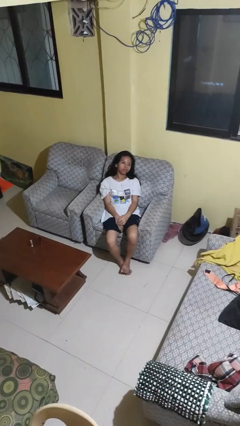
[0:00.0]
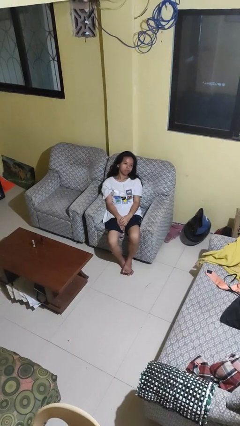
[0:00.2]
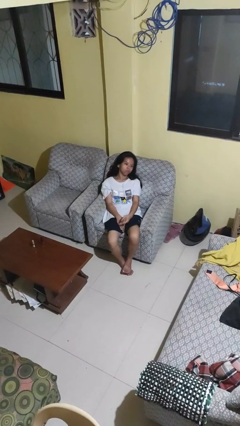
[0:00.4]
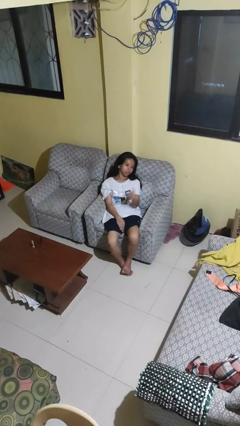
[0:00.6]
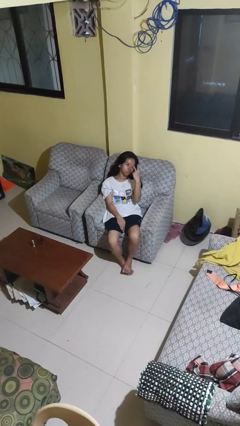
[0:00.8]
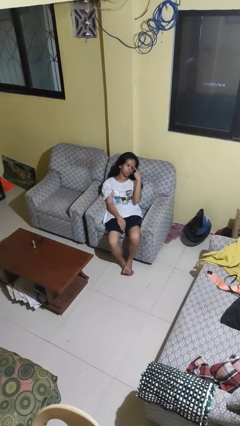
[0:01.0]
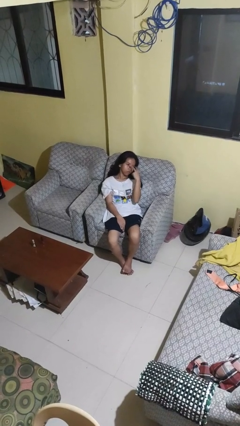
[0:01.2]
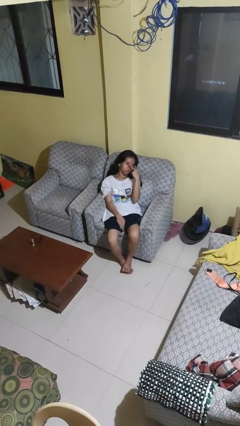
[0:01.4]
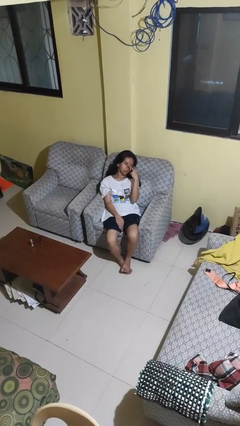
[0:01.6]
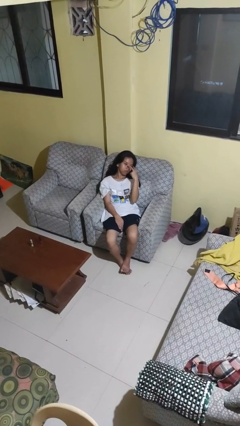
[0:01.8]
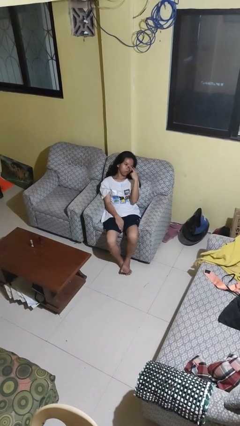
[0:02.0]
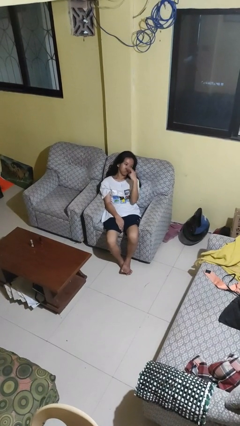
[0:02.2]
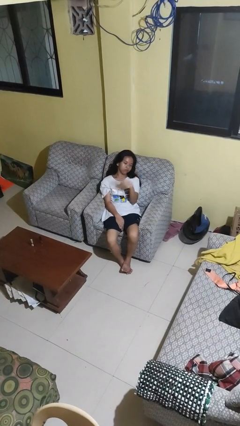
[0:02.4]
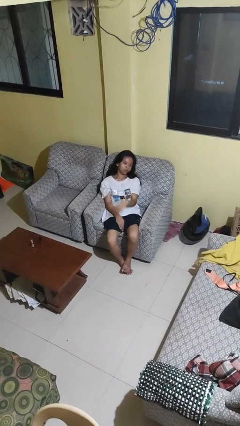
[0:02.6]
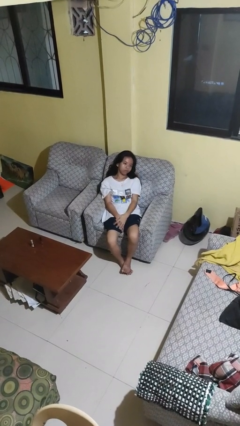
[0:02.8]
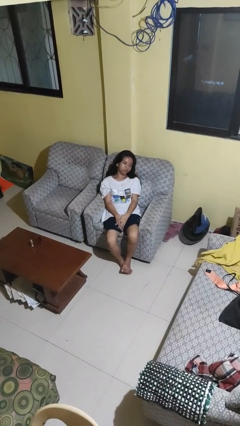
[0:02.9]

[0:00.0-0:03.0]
person gestures watch closely

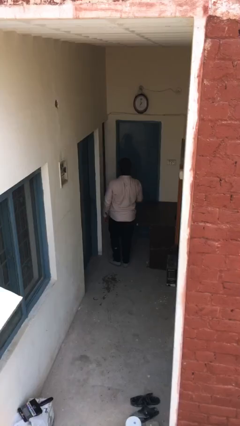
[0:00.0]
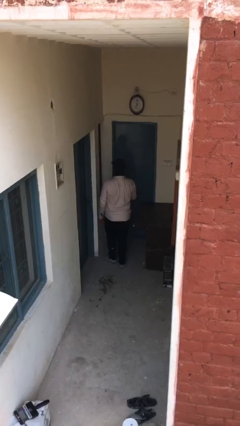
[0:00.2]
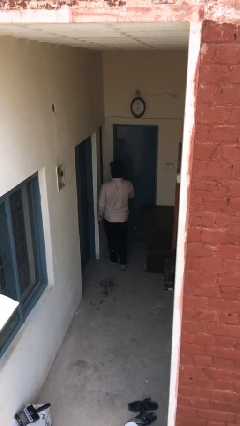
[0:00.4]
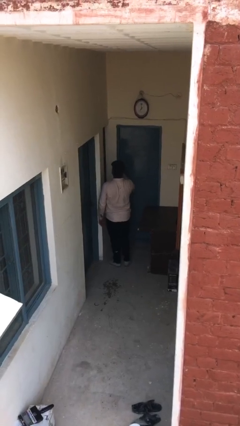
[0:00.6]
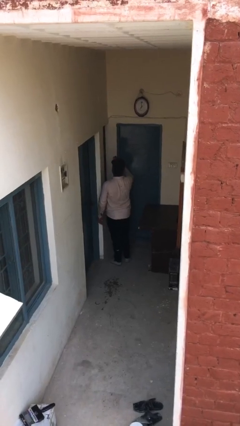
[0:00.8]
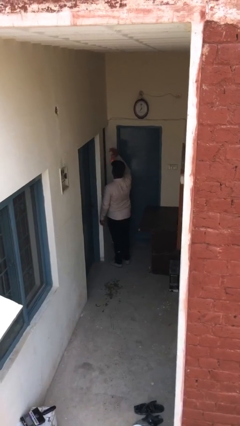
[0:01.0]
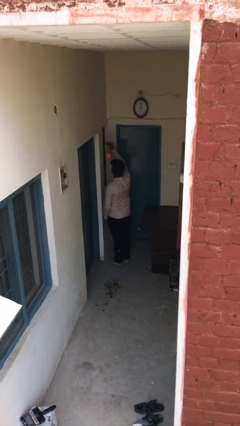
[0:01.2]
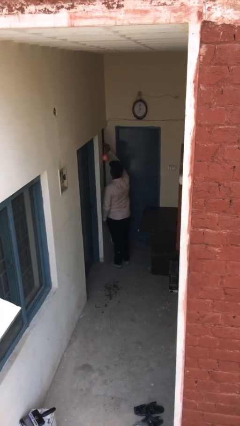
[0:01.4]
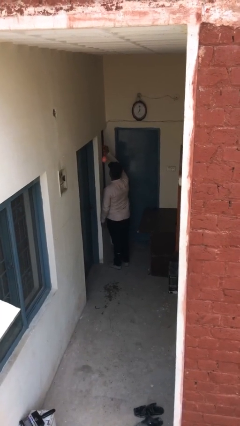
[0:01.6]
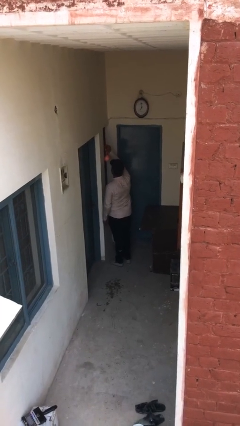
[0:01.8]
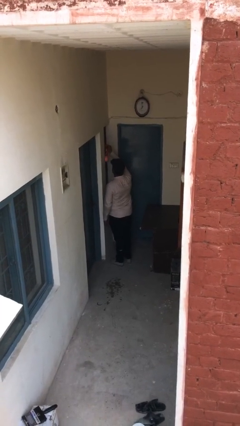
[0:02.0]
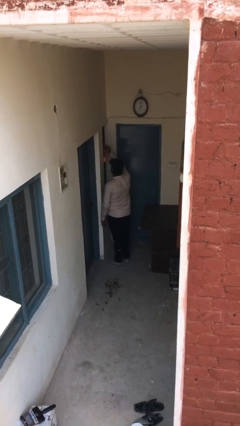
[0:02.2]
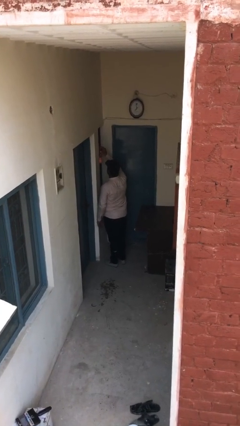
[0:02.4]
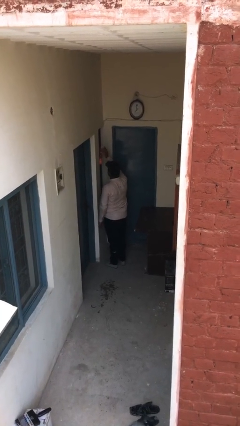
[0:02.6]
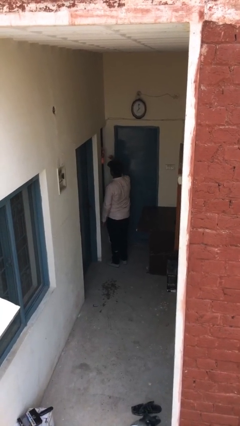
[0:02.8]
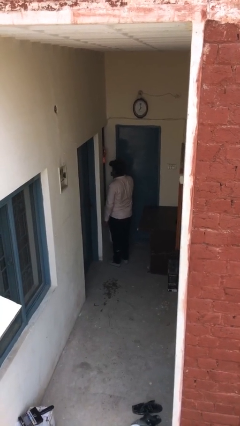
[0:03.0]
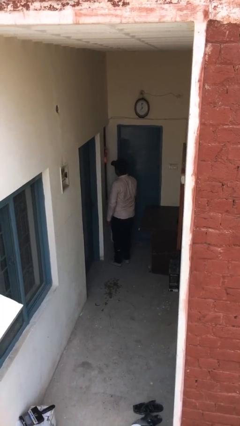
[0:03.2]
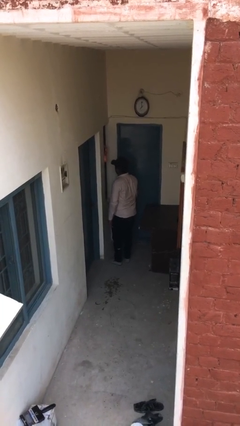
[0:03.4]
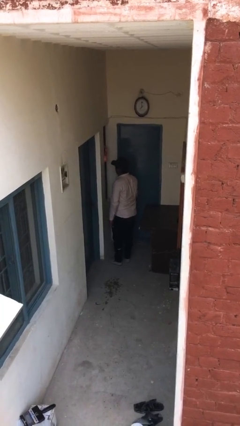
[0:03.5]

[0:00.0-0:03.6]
person puts down object on shelf

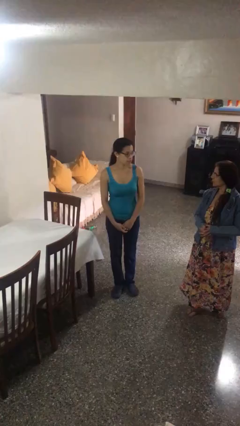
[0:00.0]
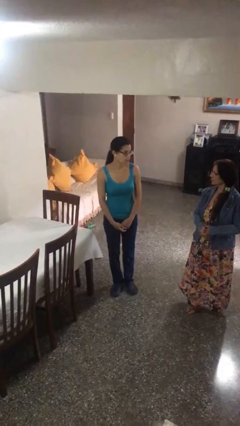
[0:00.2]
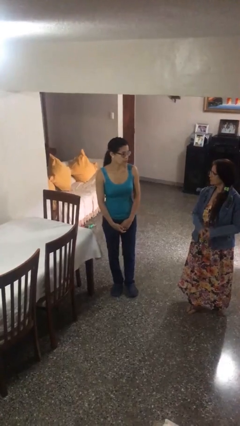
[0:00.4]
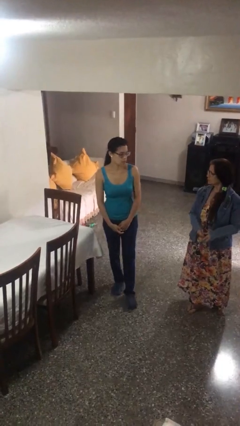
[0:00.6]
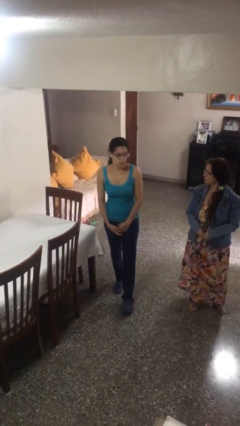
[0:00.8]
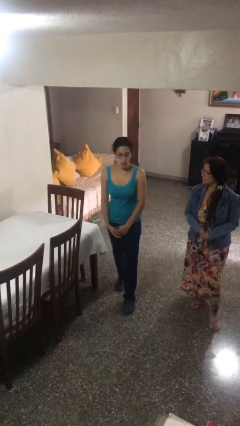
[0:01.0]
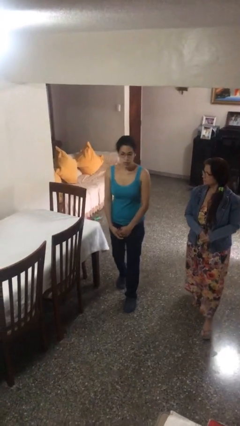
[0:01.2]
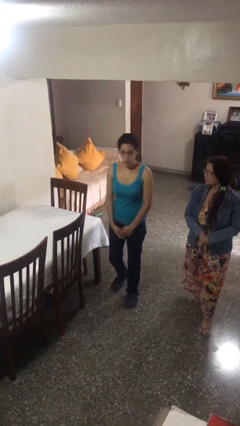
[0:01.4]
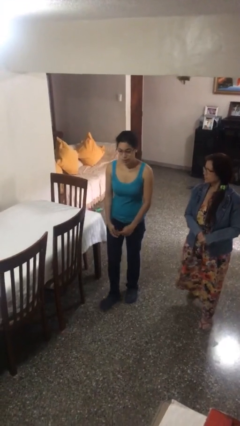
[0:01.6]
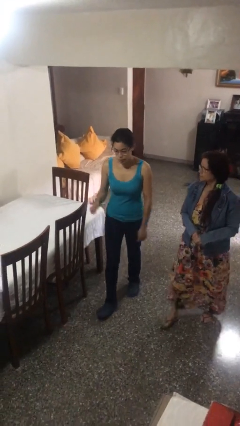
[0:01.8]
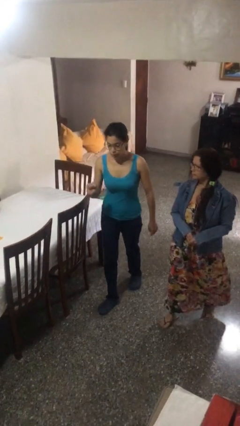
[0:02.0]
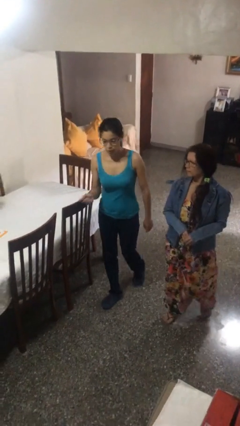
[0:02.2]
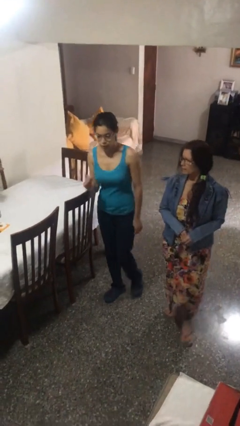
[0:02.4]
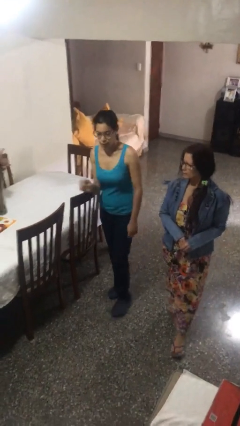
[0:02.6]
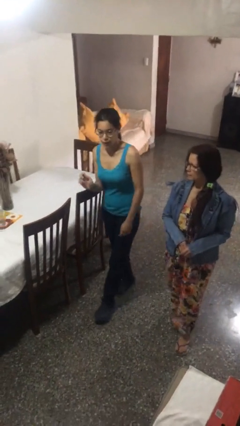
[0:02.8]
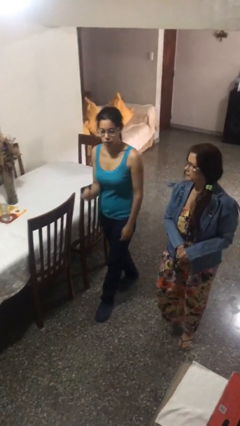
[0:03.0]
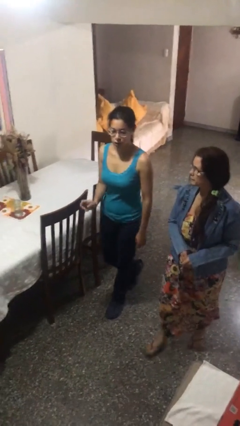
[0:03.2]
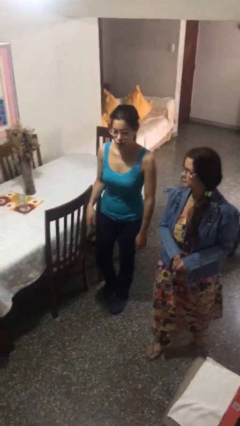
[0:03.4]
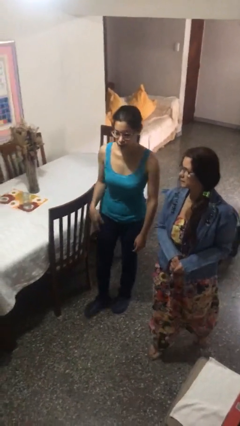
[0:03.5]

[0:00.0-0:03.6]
person talks to person

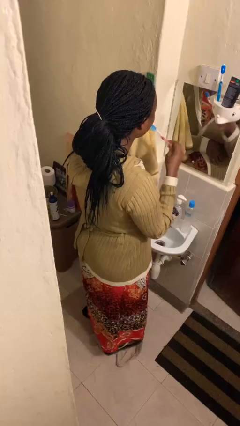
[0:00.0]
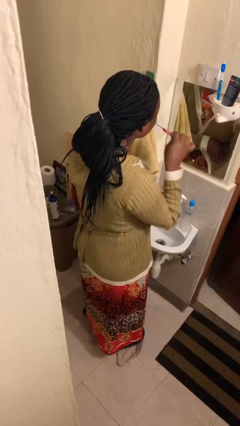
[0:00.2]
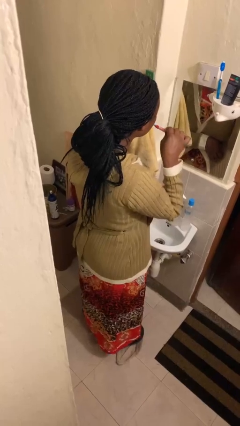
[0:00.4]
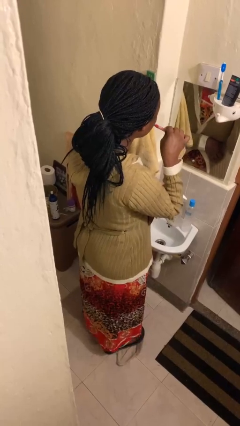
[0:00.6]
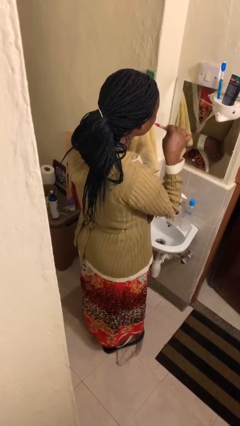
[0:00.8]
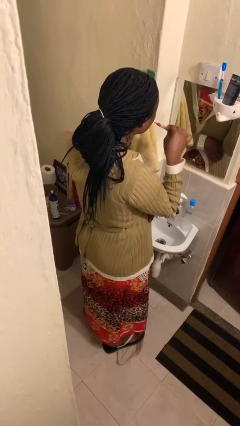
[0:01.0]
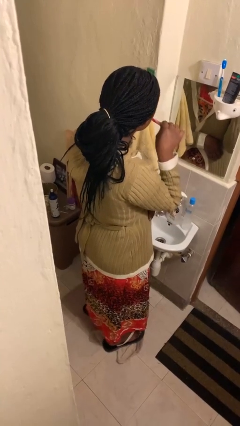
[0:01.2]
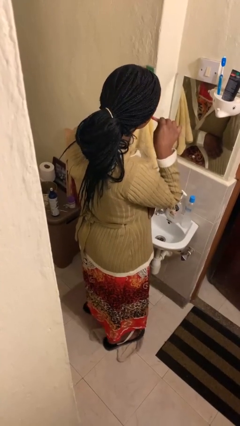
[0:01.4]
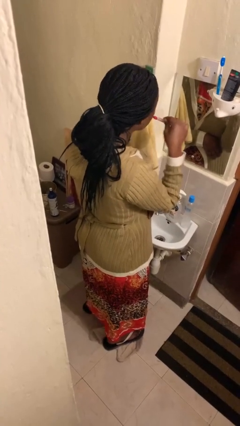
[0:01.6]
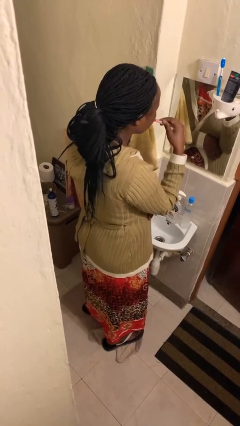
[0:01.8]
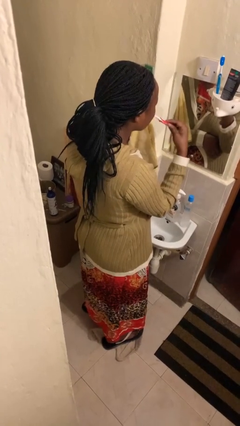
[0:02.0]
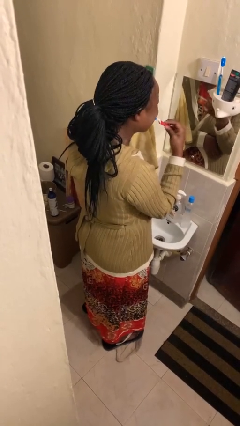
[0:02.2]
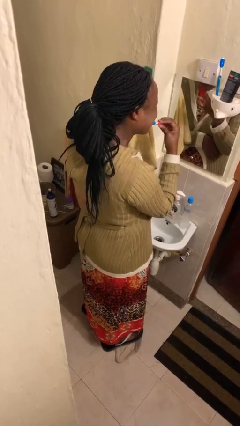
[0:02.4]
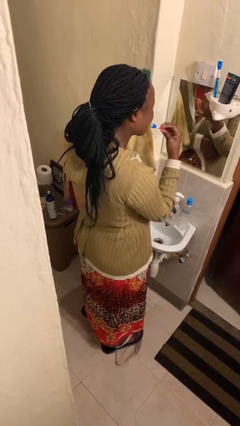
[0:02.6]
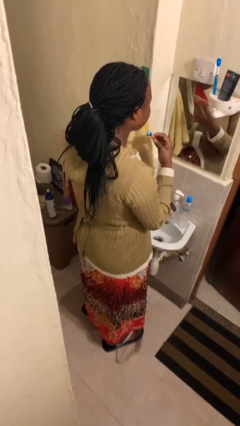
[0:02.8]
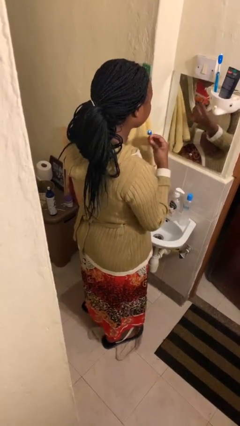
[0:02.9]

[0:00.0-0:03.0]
person brushes teeth

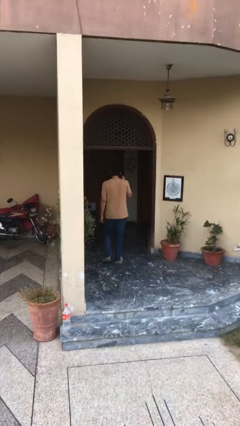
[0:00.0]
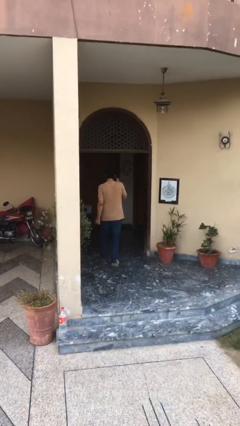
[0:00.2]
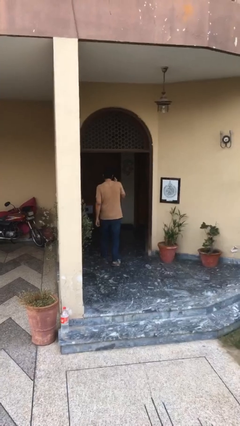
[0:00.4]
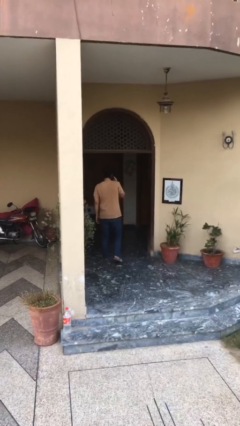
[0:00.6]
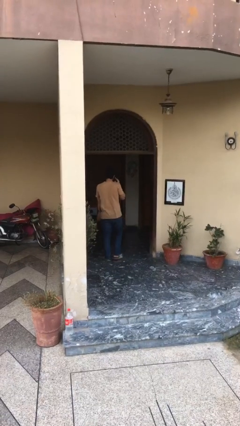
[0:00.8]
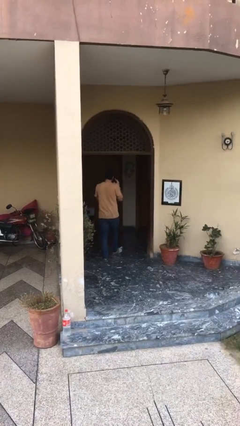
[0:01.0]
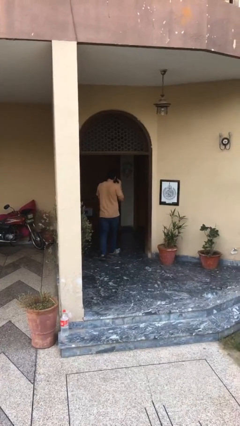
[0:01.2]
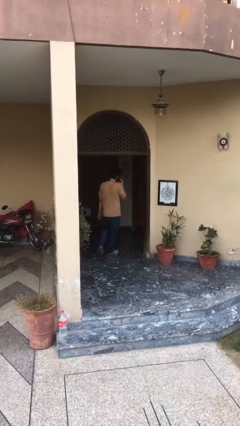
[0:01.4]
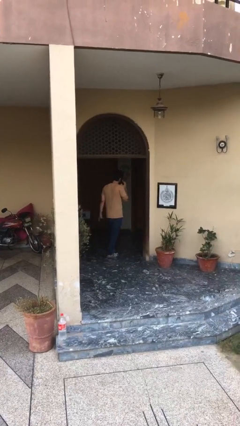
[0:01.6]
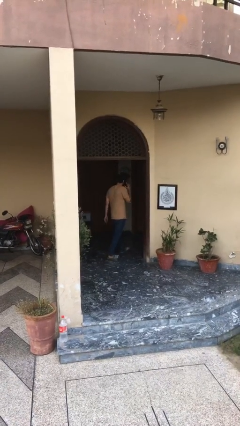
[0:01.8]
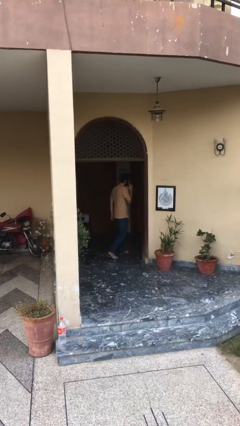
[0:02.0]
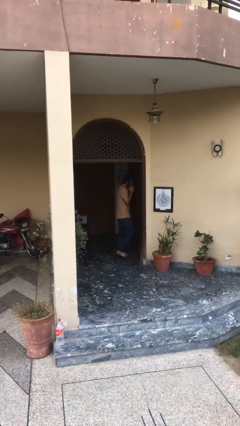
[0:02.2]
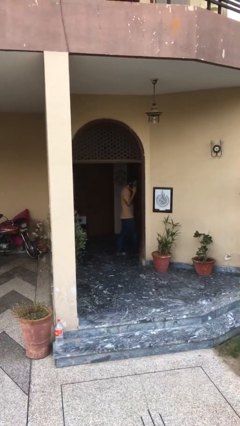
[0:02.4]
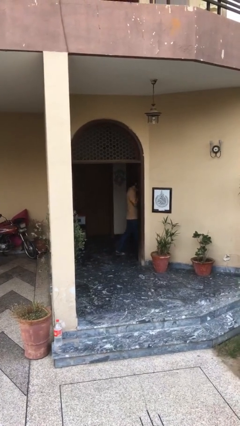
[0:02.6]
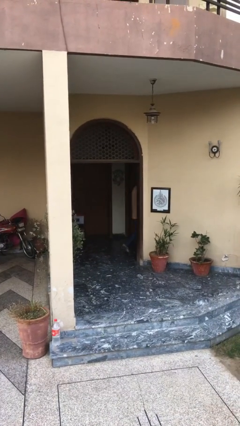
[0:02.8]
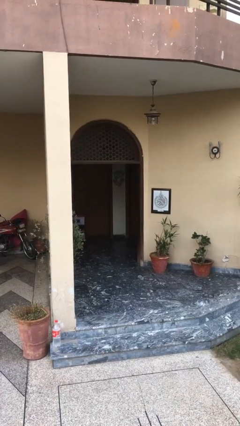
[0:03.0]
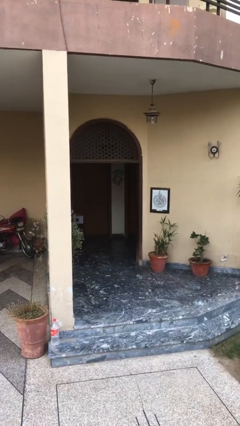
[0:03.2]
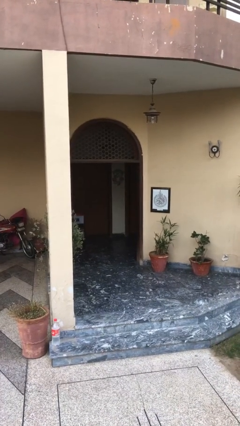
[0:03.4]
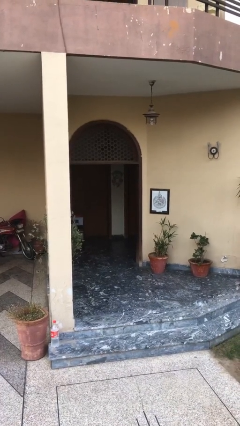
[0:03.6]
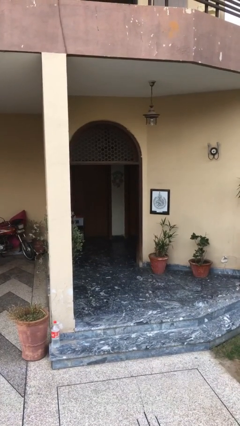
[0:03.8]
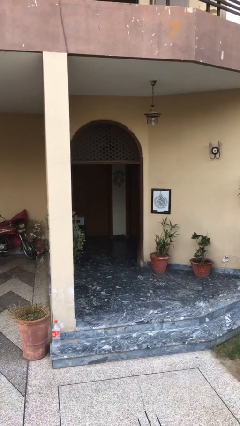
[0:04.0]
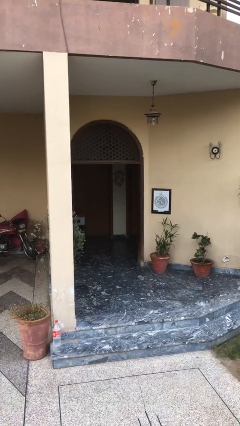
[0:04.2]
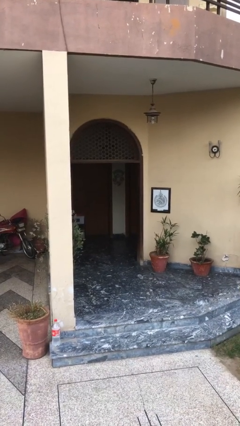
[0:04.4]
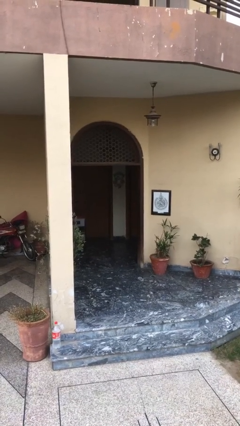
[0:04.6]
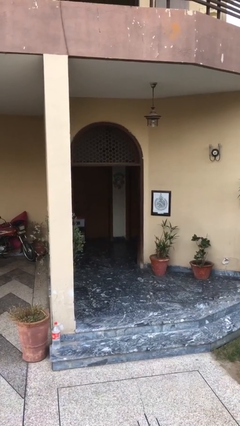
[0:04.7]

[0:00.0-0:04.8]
person exits scene through structure
